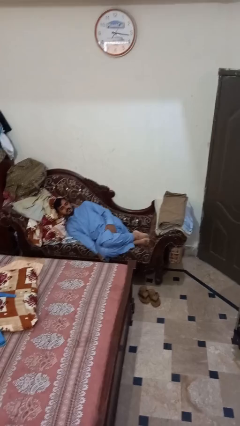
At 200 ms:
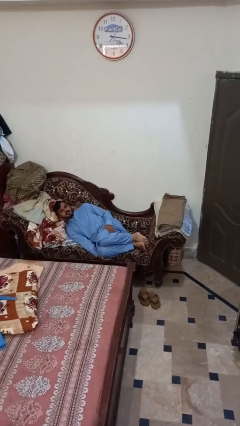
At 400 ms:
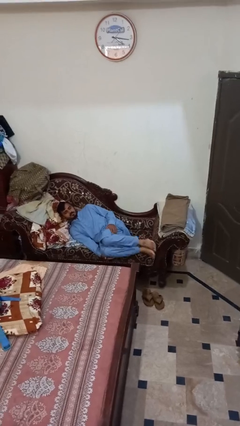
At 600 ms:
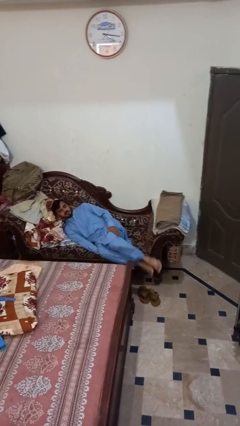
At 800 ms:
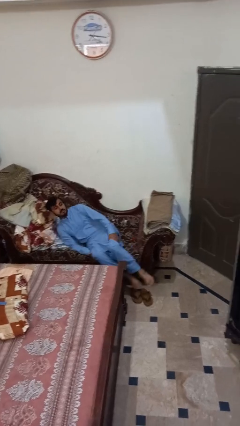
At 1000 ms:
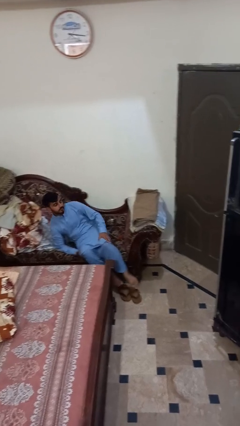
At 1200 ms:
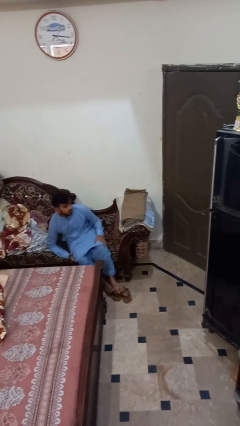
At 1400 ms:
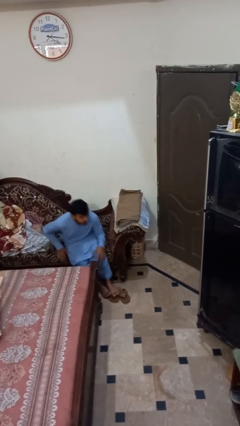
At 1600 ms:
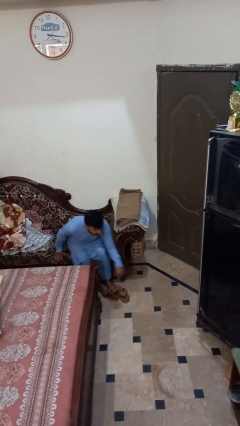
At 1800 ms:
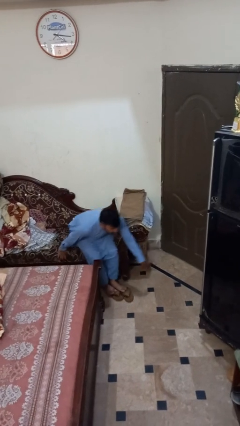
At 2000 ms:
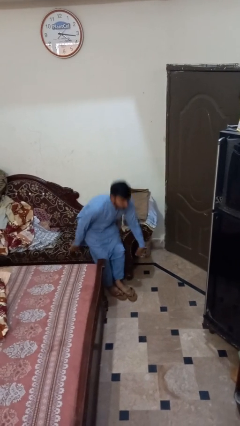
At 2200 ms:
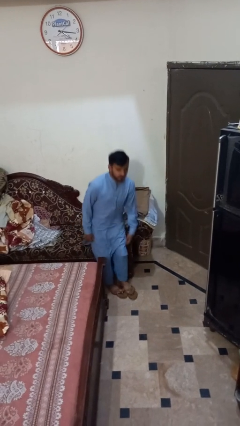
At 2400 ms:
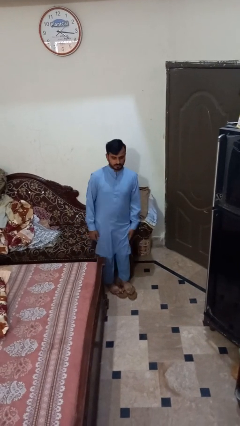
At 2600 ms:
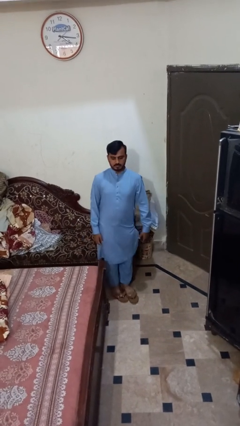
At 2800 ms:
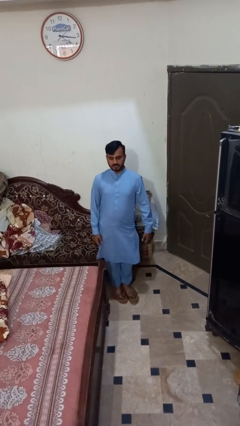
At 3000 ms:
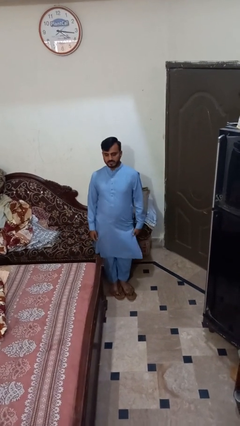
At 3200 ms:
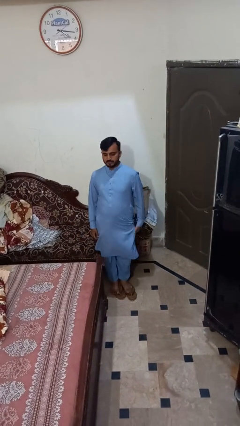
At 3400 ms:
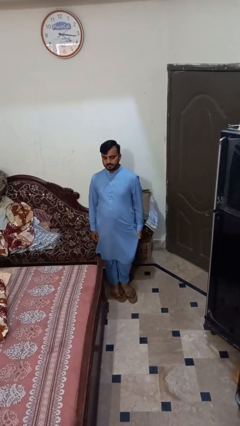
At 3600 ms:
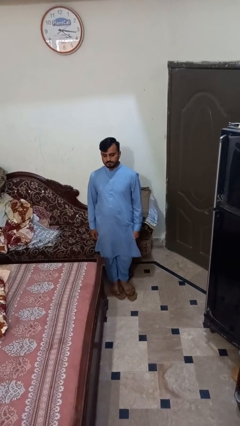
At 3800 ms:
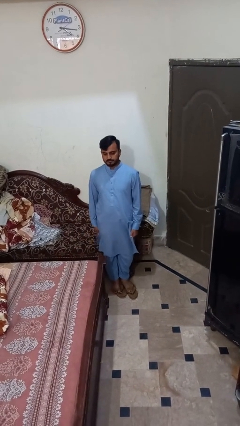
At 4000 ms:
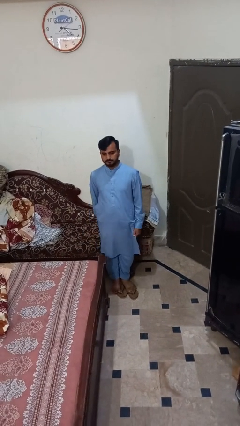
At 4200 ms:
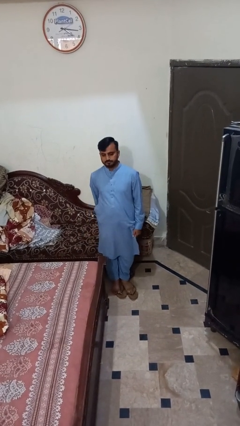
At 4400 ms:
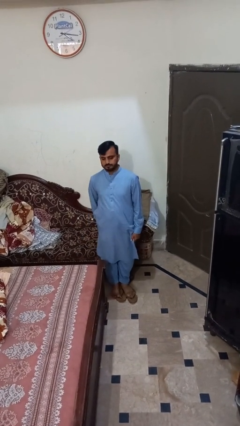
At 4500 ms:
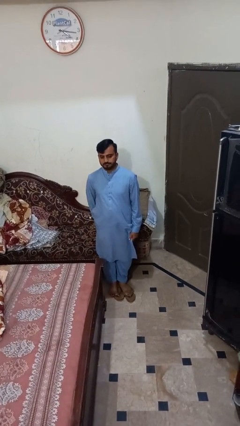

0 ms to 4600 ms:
person stands up

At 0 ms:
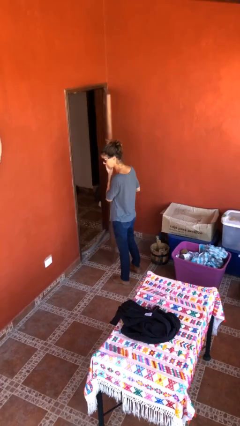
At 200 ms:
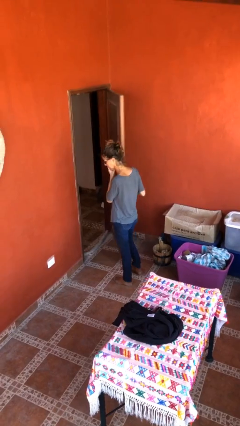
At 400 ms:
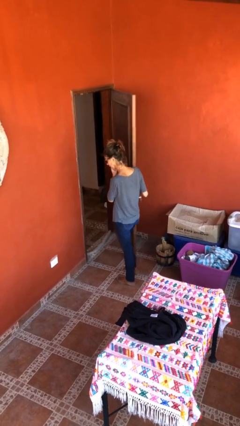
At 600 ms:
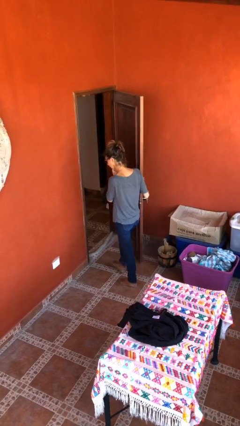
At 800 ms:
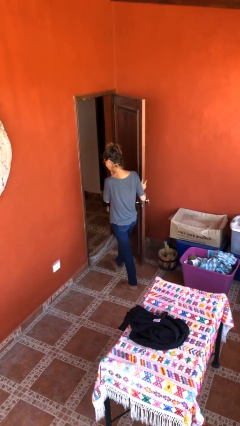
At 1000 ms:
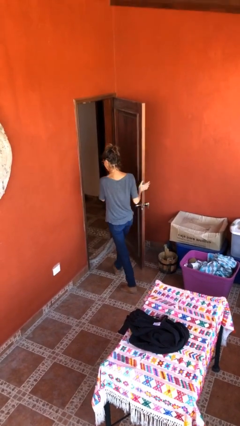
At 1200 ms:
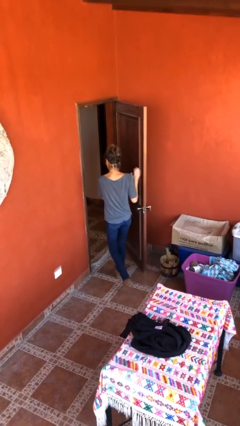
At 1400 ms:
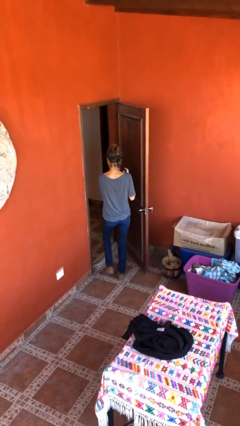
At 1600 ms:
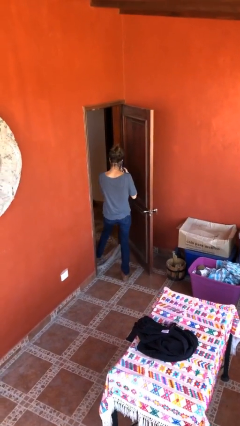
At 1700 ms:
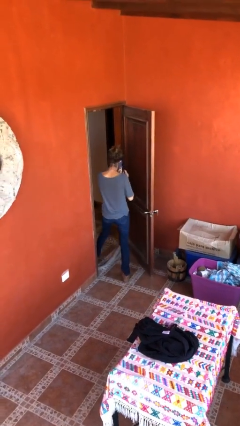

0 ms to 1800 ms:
person exits scene through structure

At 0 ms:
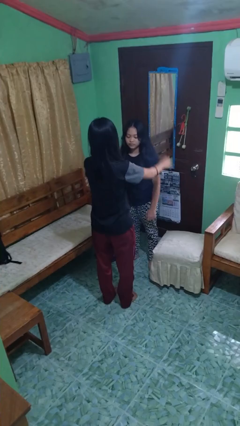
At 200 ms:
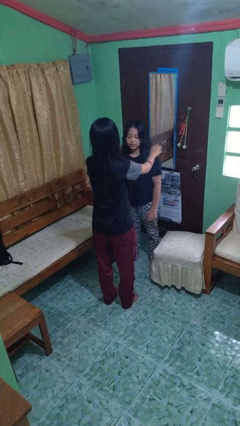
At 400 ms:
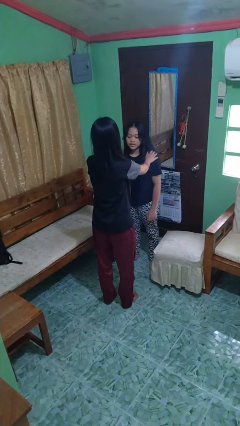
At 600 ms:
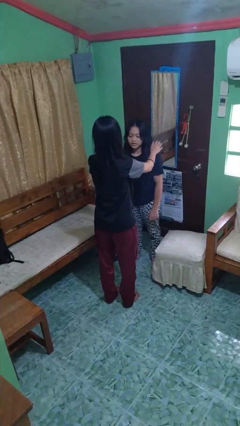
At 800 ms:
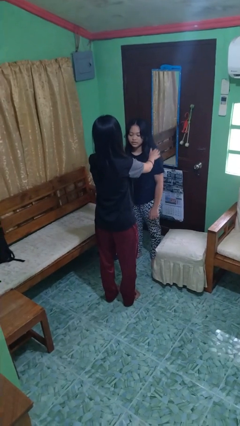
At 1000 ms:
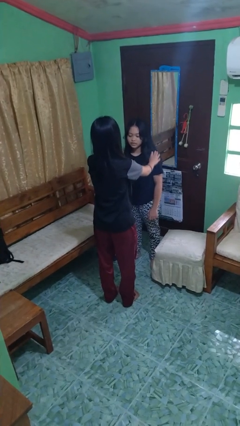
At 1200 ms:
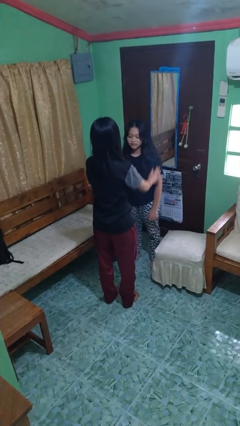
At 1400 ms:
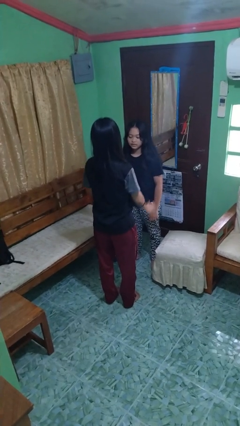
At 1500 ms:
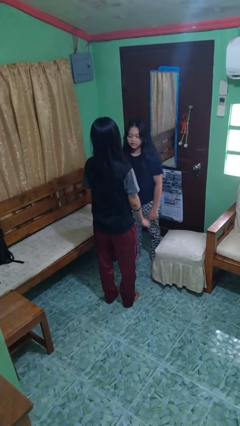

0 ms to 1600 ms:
person pounds shoulders of person

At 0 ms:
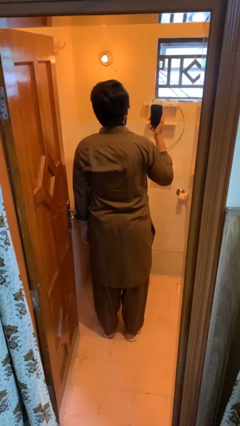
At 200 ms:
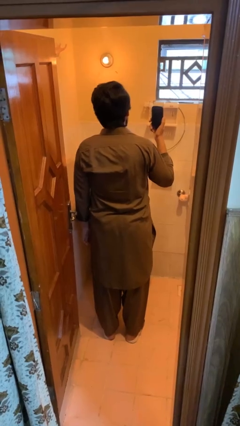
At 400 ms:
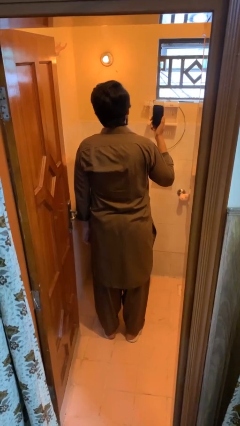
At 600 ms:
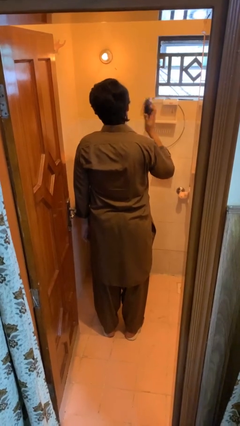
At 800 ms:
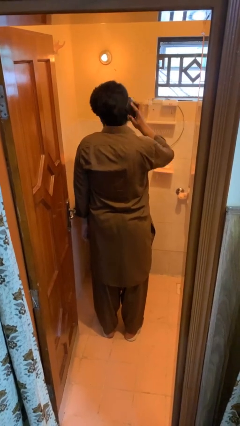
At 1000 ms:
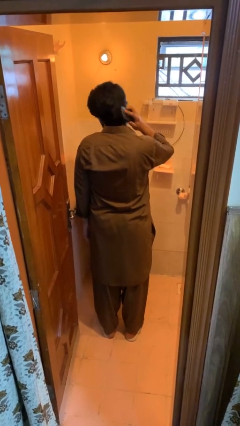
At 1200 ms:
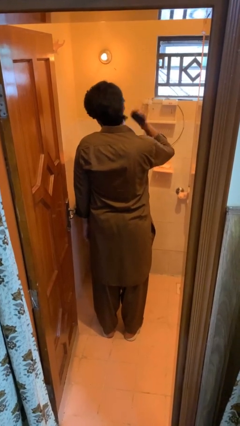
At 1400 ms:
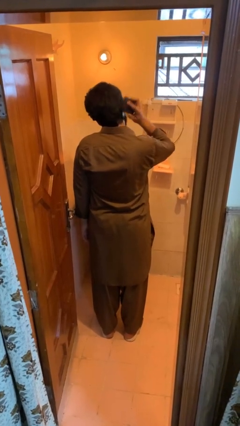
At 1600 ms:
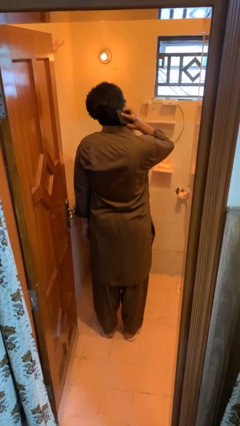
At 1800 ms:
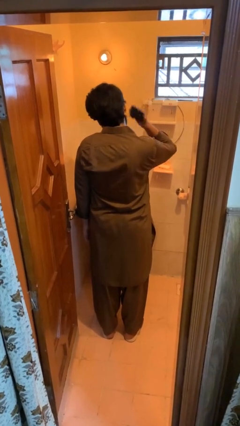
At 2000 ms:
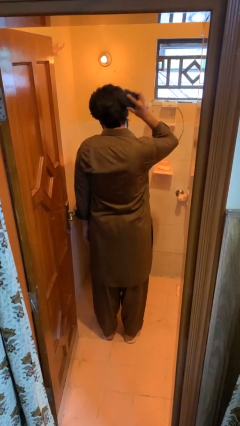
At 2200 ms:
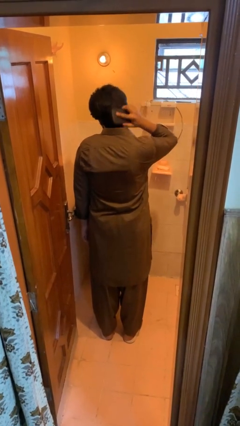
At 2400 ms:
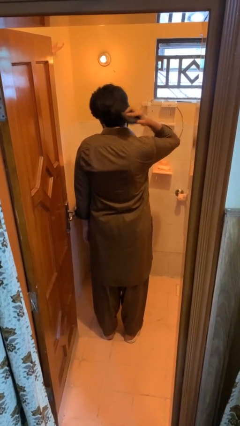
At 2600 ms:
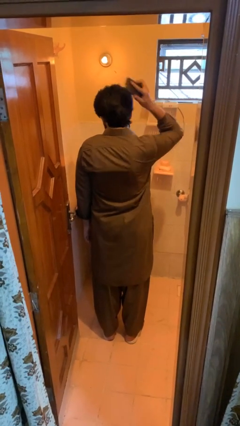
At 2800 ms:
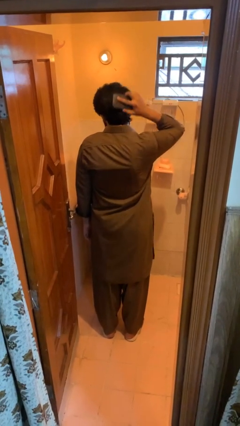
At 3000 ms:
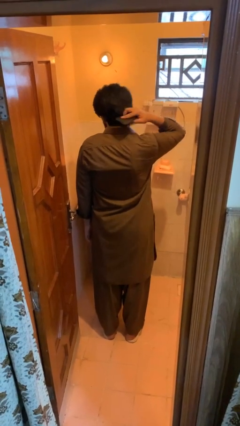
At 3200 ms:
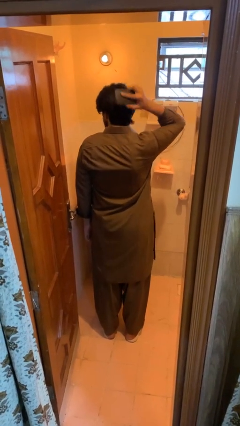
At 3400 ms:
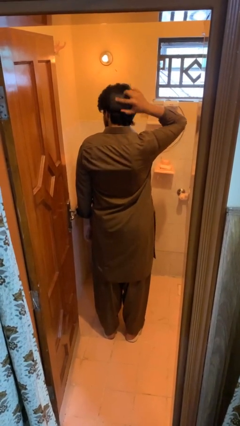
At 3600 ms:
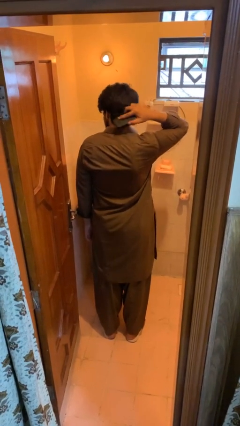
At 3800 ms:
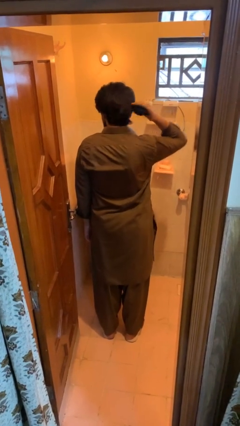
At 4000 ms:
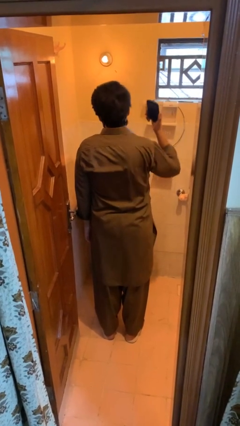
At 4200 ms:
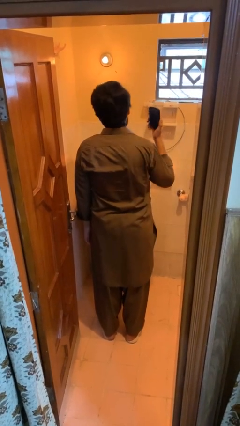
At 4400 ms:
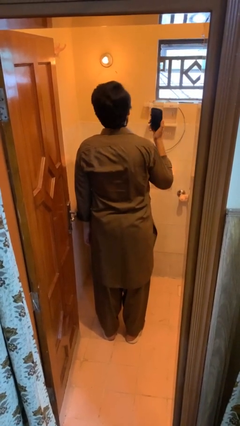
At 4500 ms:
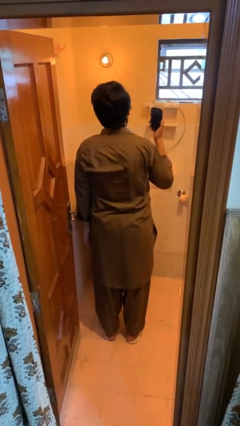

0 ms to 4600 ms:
person brushes hair

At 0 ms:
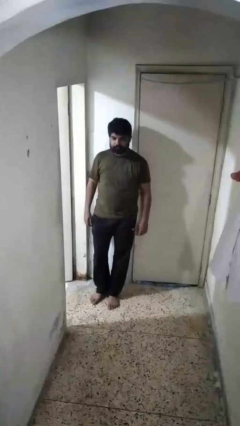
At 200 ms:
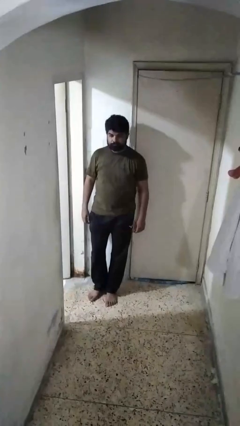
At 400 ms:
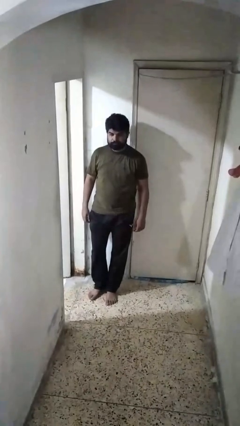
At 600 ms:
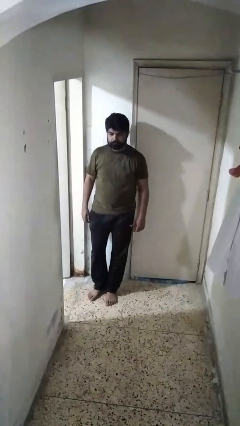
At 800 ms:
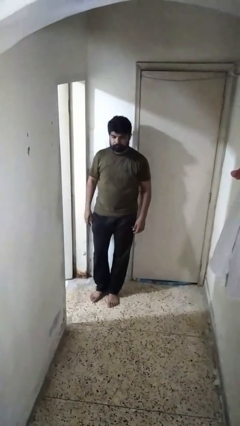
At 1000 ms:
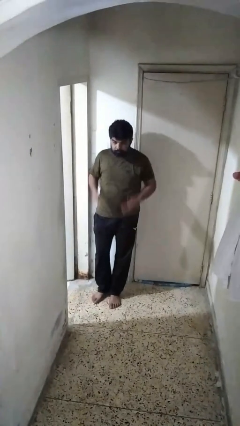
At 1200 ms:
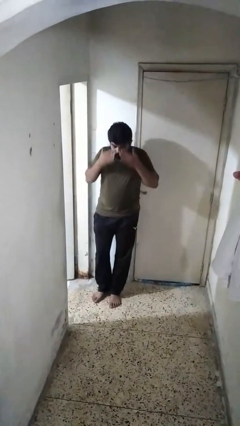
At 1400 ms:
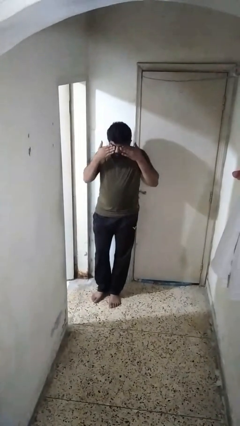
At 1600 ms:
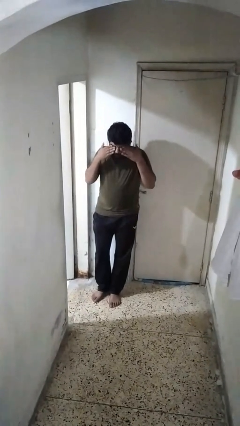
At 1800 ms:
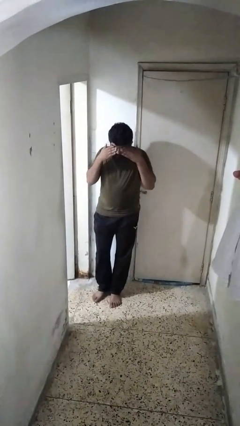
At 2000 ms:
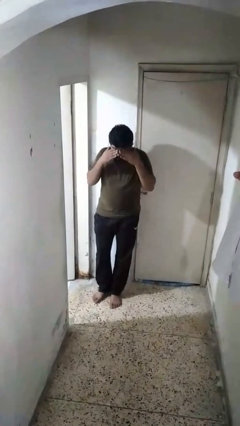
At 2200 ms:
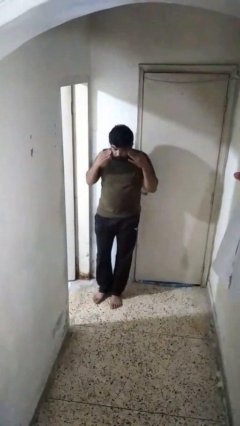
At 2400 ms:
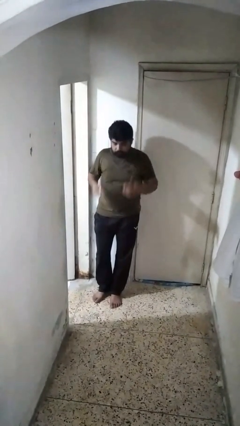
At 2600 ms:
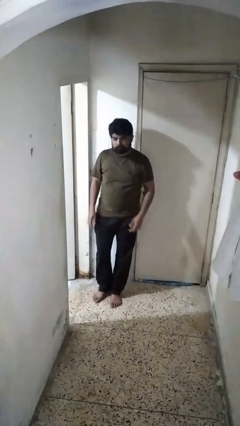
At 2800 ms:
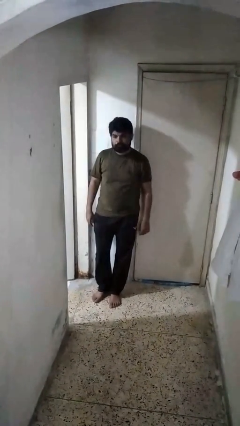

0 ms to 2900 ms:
person rubs eyes

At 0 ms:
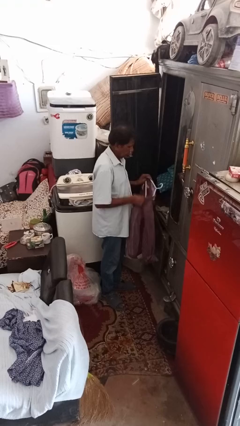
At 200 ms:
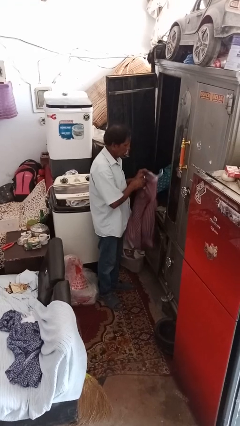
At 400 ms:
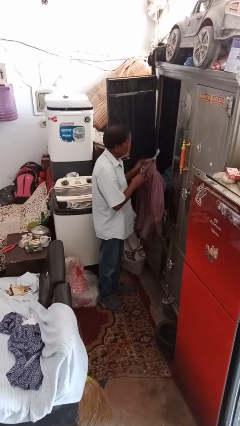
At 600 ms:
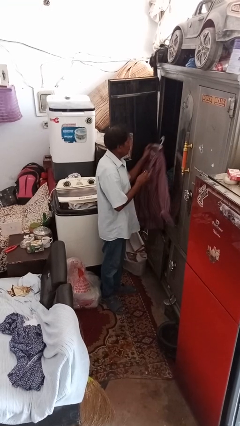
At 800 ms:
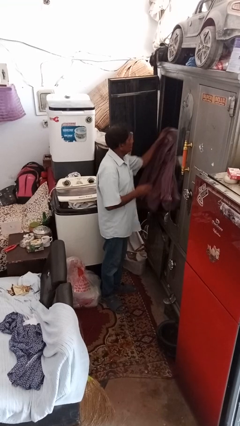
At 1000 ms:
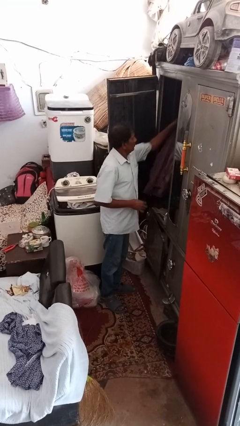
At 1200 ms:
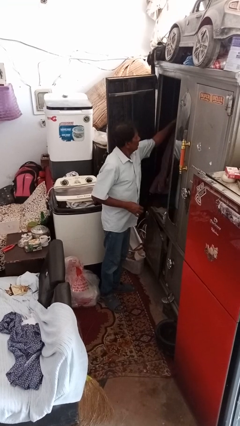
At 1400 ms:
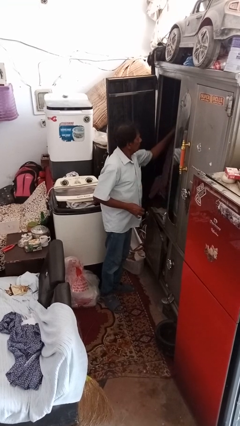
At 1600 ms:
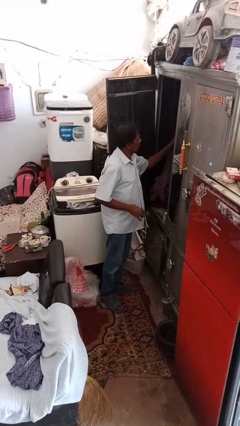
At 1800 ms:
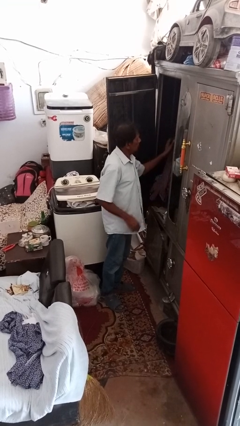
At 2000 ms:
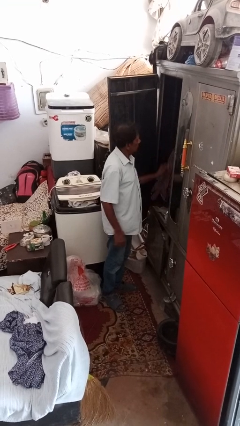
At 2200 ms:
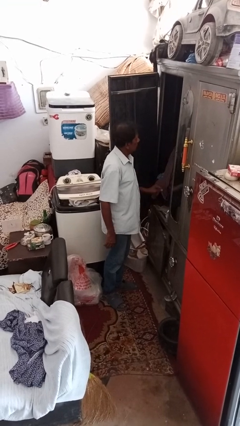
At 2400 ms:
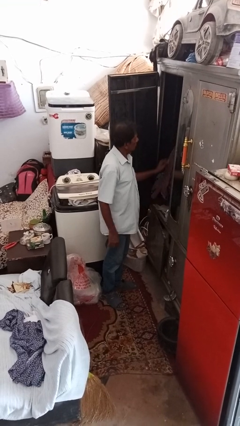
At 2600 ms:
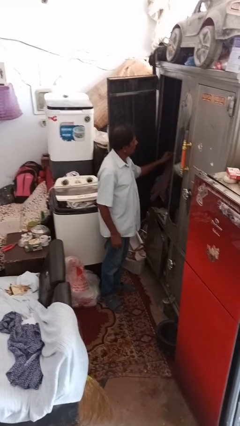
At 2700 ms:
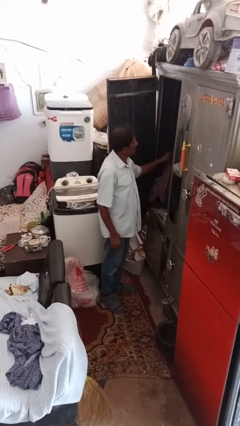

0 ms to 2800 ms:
person puts clothes into closet
